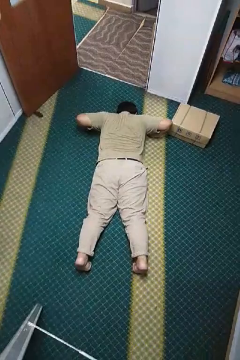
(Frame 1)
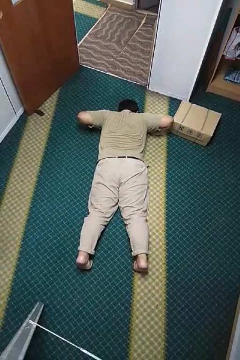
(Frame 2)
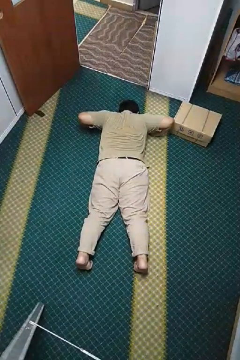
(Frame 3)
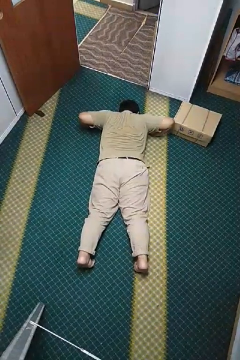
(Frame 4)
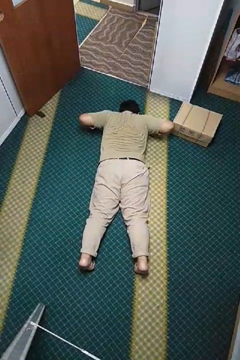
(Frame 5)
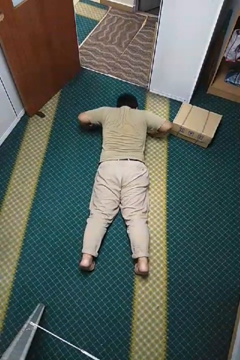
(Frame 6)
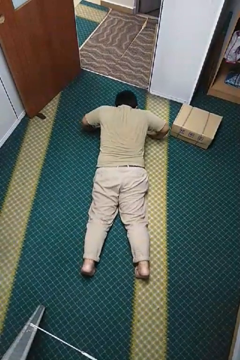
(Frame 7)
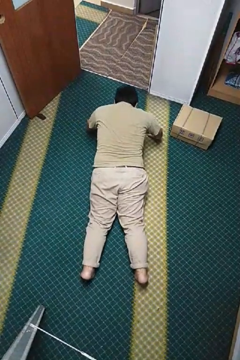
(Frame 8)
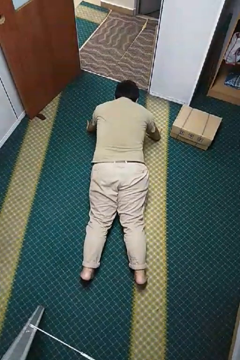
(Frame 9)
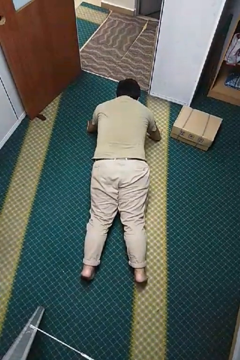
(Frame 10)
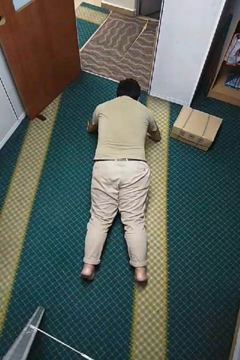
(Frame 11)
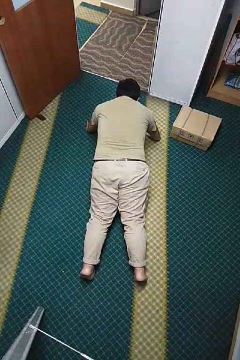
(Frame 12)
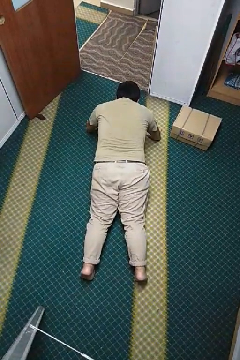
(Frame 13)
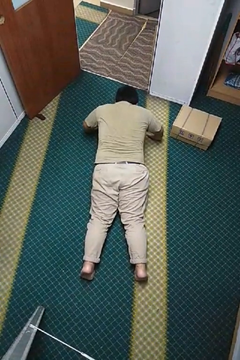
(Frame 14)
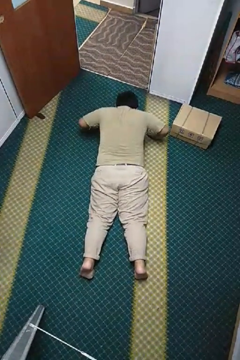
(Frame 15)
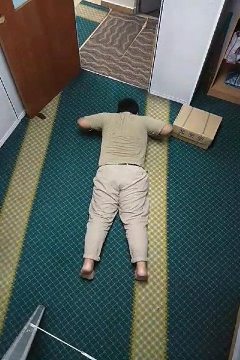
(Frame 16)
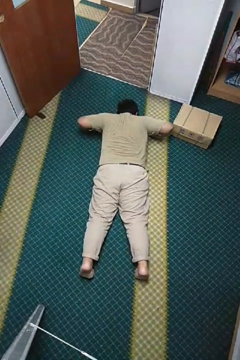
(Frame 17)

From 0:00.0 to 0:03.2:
person exercises with pushup

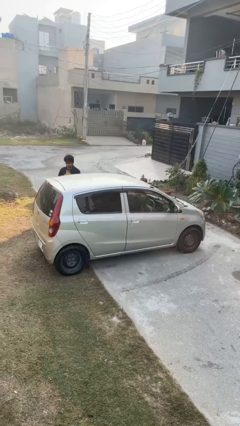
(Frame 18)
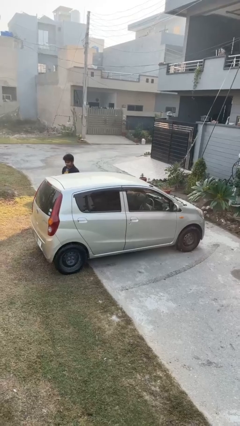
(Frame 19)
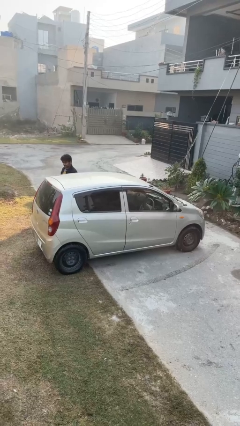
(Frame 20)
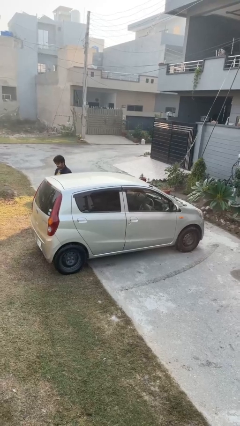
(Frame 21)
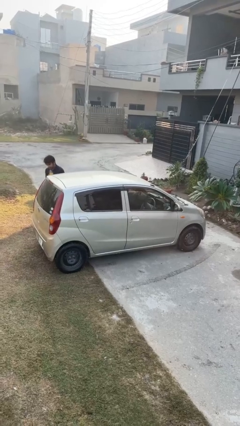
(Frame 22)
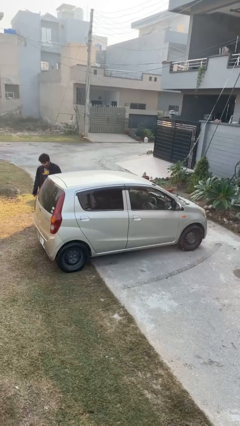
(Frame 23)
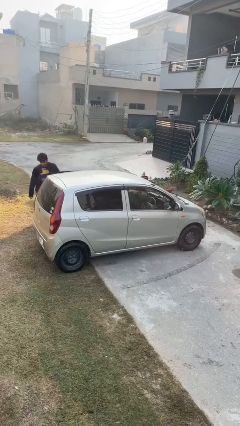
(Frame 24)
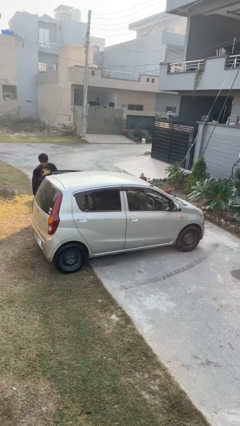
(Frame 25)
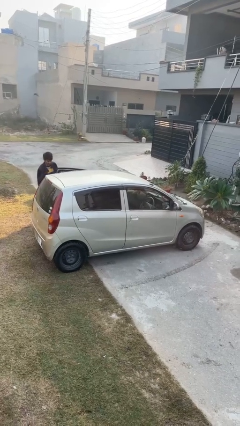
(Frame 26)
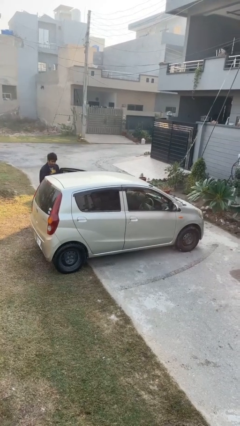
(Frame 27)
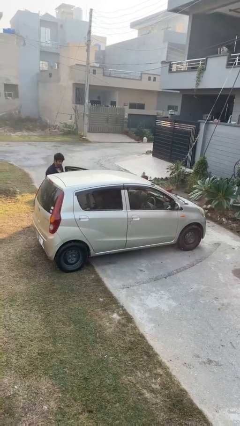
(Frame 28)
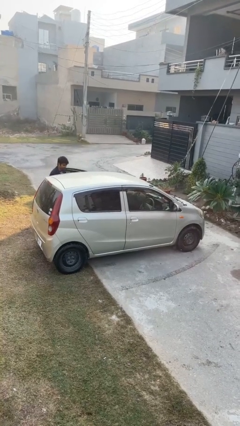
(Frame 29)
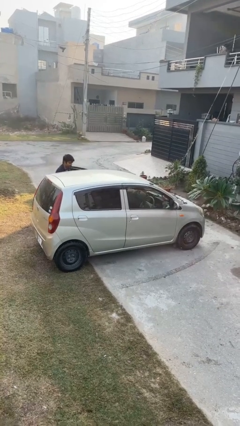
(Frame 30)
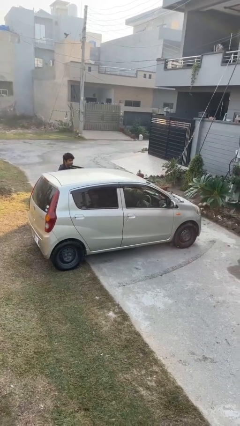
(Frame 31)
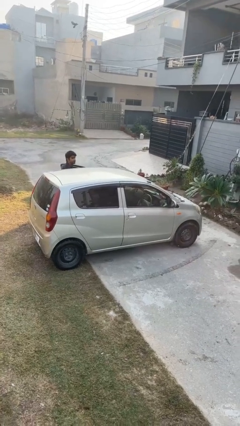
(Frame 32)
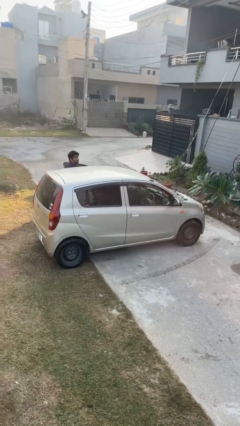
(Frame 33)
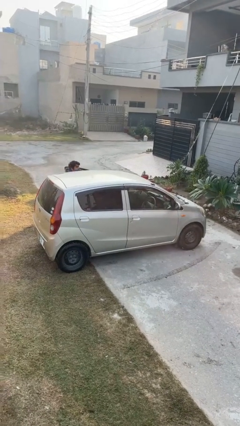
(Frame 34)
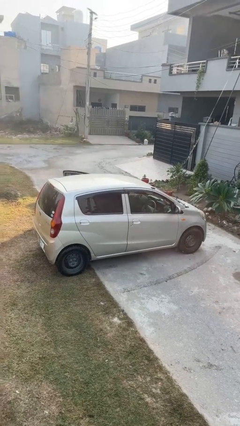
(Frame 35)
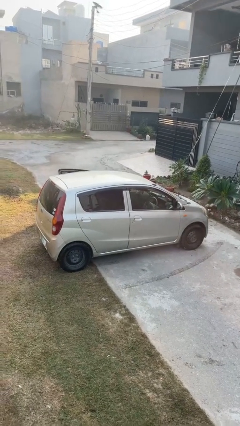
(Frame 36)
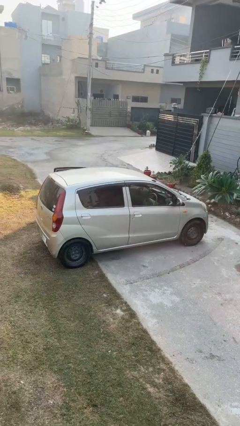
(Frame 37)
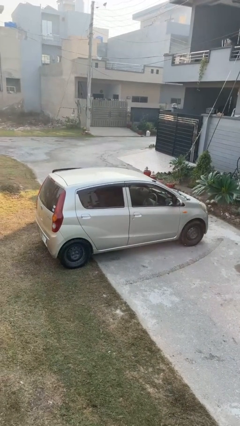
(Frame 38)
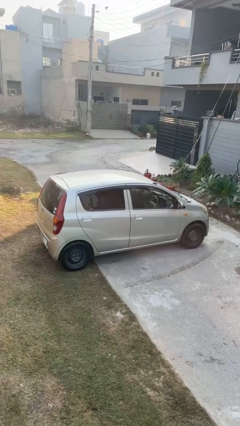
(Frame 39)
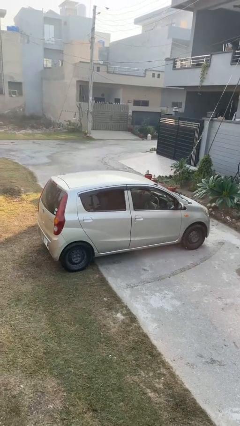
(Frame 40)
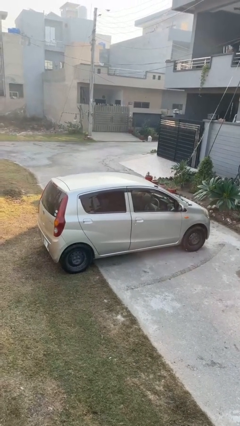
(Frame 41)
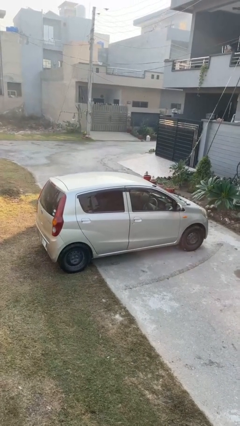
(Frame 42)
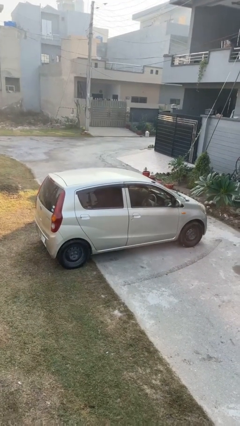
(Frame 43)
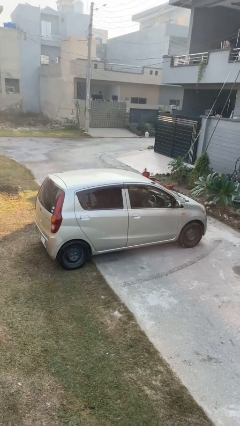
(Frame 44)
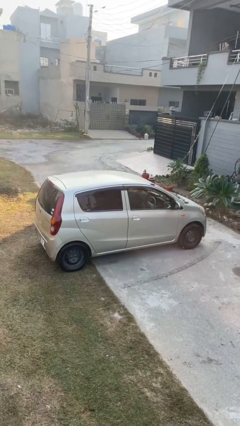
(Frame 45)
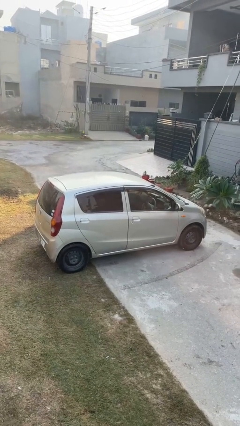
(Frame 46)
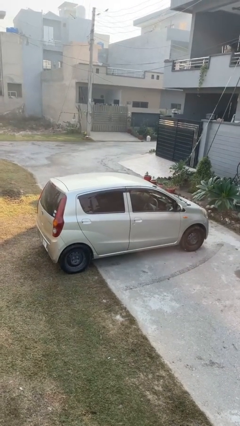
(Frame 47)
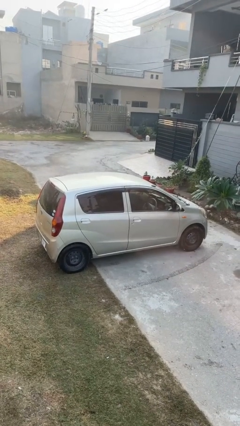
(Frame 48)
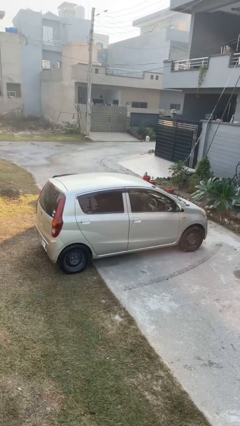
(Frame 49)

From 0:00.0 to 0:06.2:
car picks up person

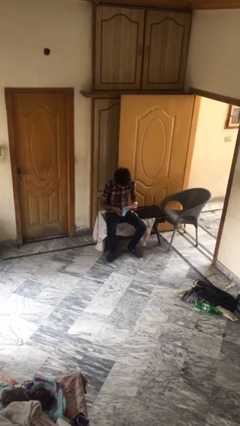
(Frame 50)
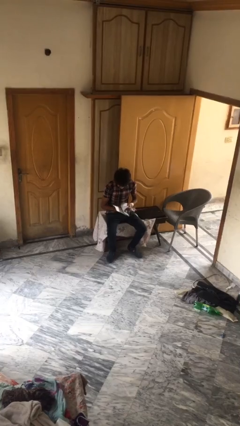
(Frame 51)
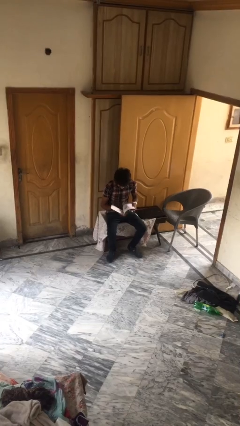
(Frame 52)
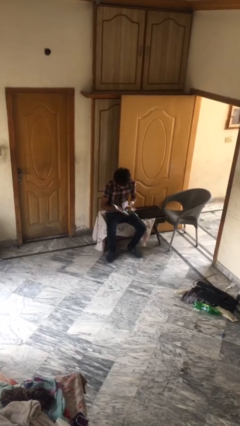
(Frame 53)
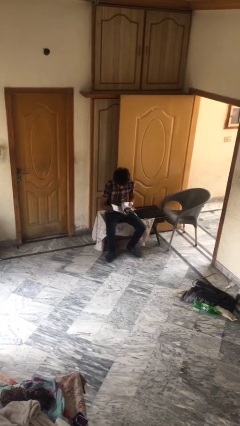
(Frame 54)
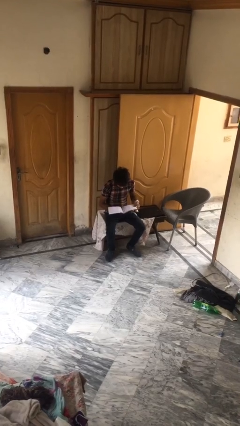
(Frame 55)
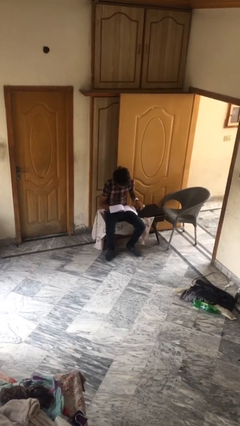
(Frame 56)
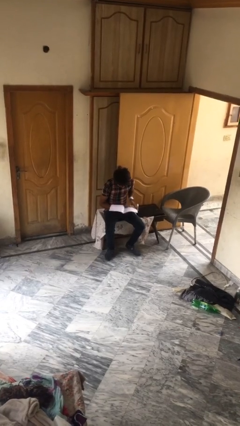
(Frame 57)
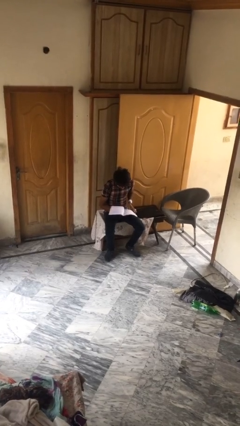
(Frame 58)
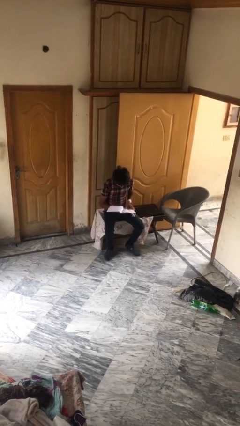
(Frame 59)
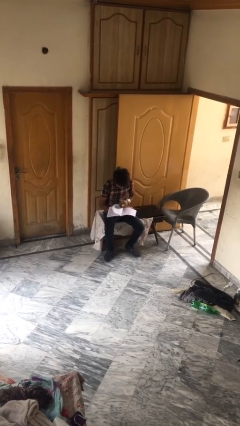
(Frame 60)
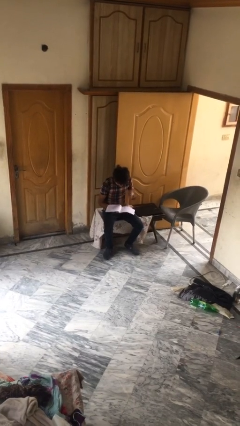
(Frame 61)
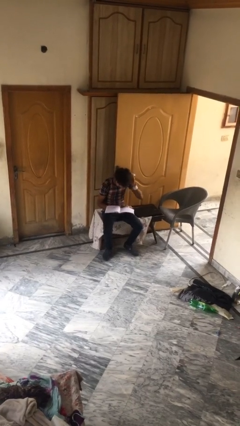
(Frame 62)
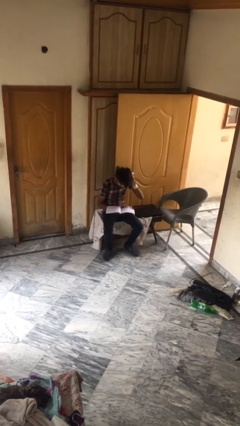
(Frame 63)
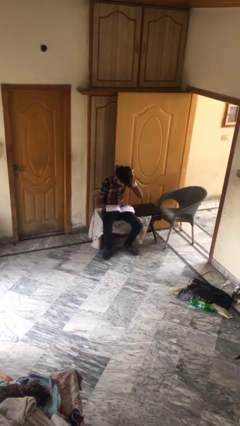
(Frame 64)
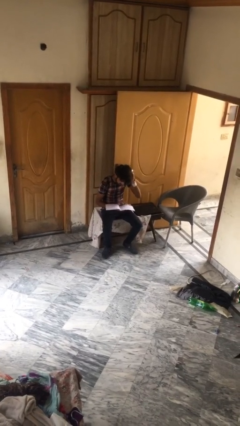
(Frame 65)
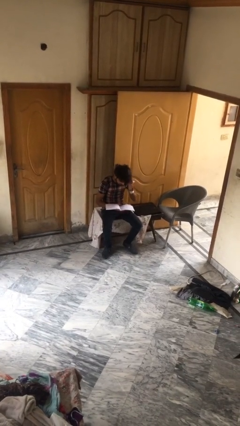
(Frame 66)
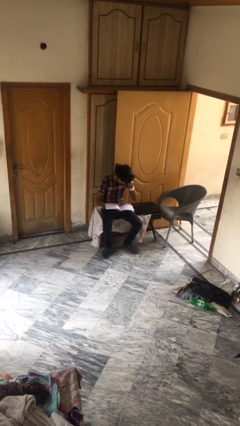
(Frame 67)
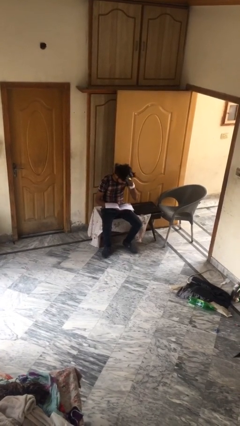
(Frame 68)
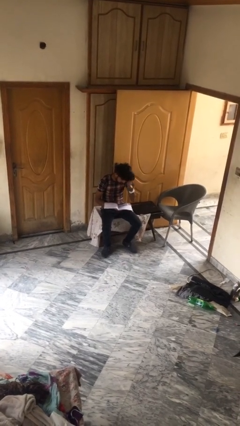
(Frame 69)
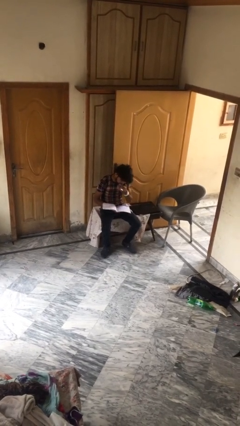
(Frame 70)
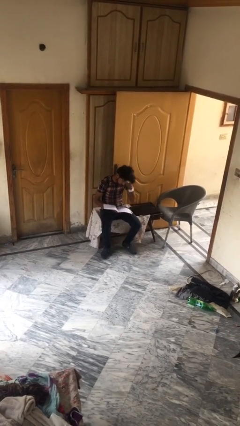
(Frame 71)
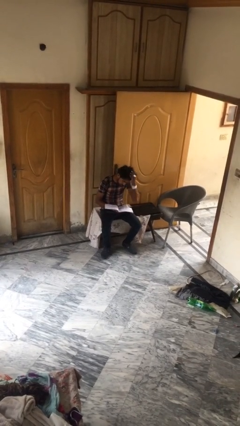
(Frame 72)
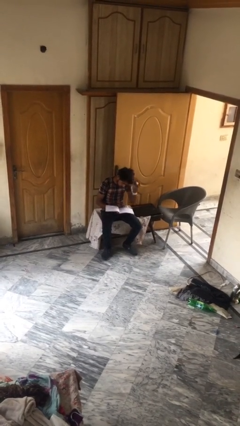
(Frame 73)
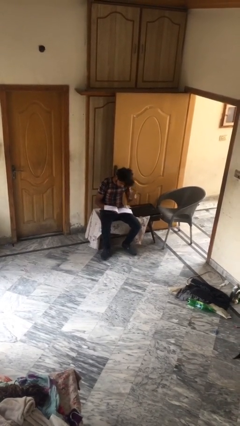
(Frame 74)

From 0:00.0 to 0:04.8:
person reads document

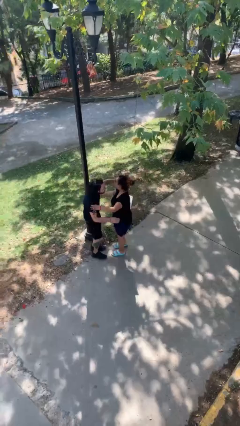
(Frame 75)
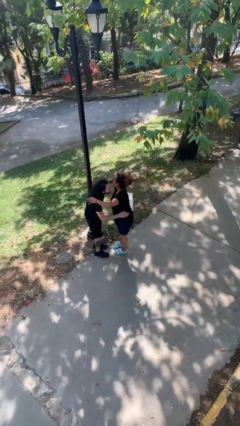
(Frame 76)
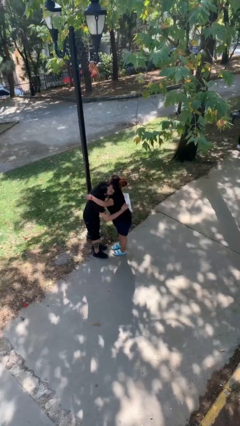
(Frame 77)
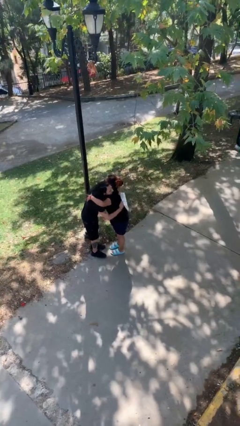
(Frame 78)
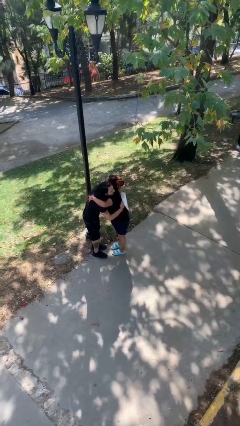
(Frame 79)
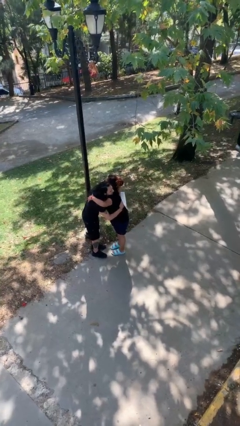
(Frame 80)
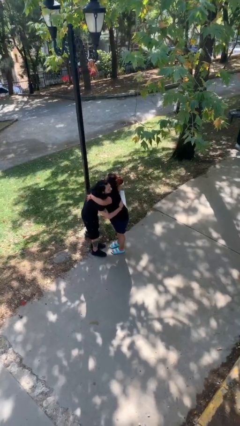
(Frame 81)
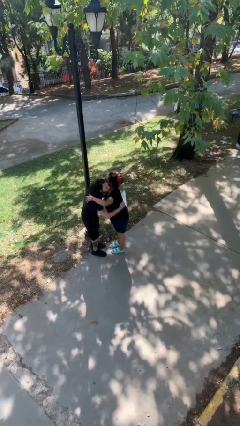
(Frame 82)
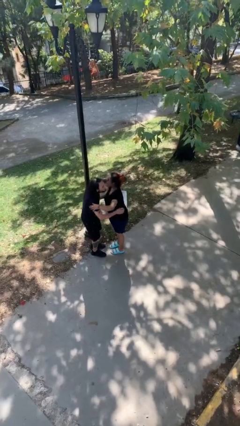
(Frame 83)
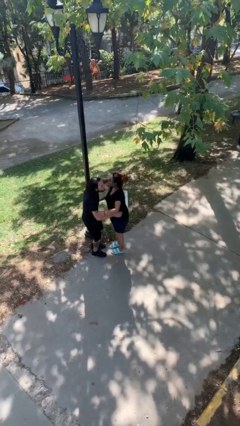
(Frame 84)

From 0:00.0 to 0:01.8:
person embraces person

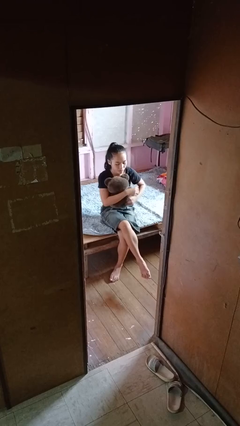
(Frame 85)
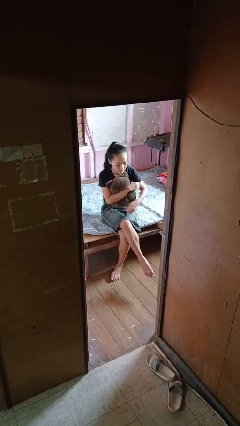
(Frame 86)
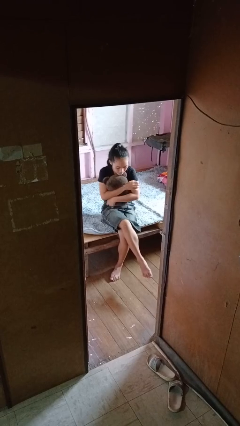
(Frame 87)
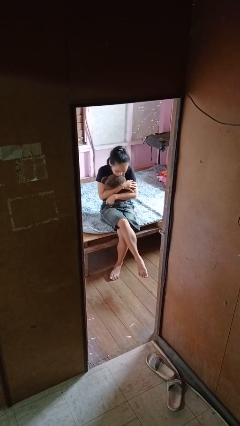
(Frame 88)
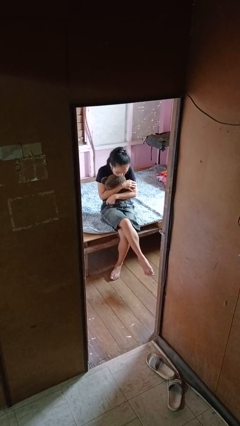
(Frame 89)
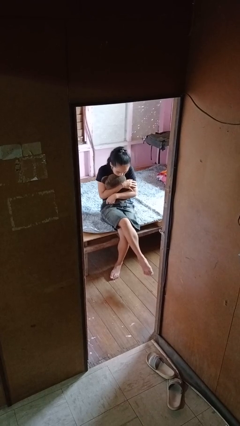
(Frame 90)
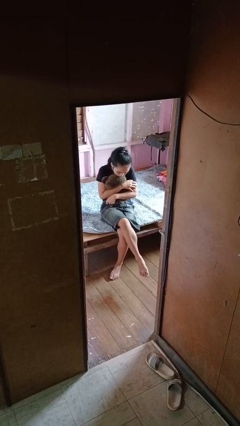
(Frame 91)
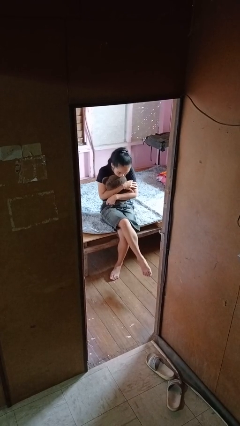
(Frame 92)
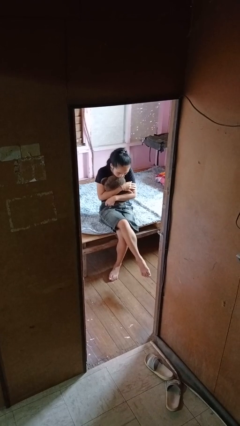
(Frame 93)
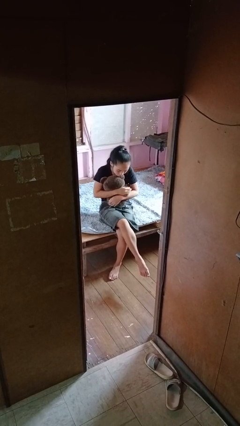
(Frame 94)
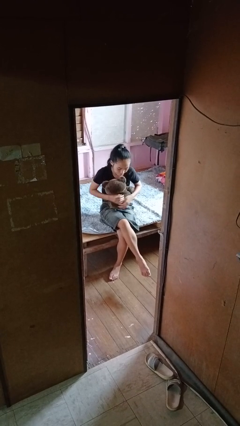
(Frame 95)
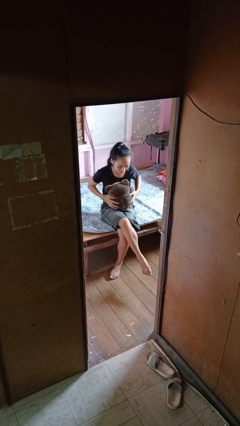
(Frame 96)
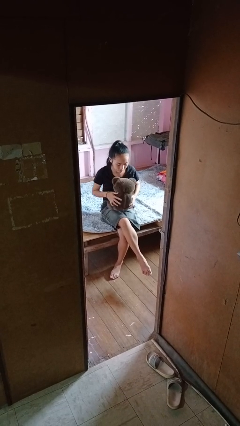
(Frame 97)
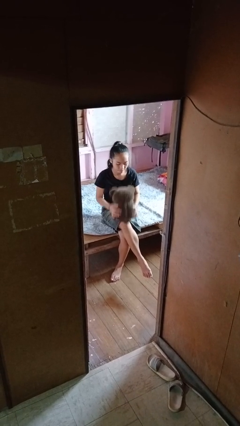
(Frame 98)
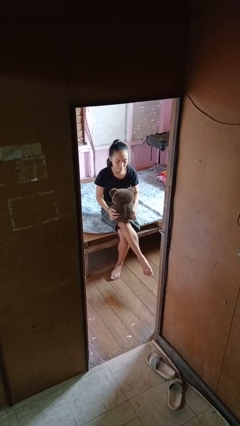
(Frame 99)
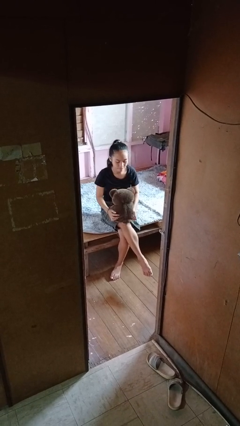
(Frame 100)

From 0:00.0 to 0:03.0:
person hugs stuffed animal
